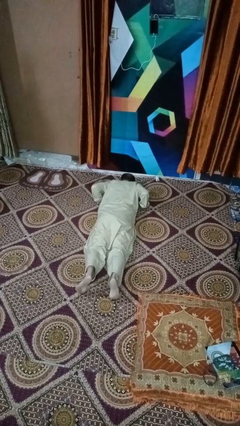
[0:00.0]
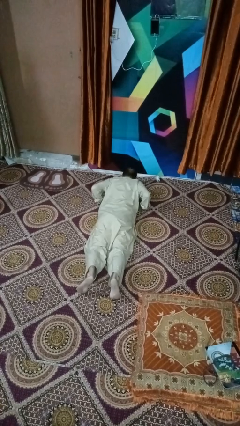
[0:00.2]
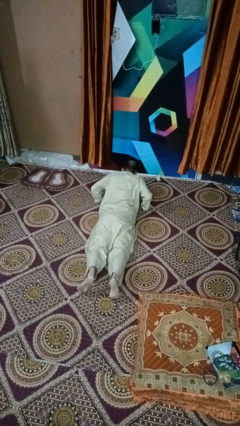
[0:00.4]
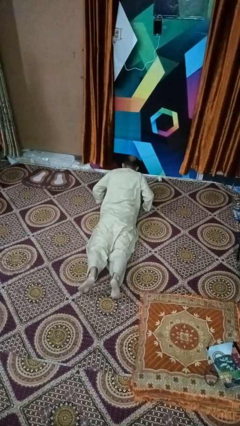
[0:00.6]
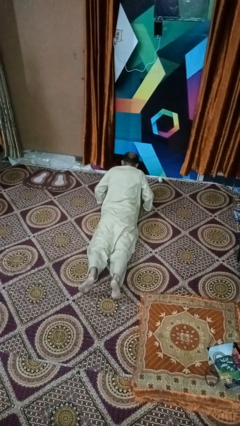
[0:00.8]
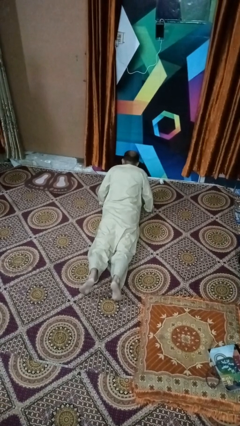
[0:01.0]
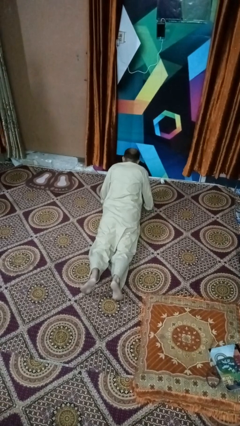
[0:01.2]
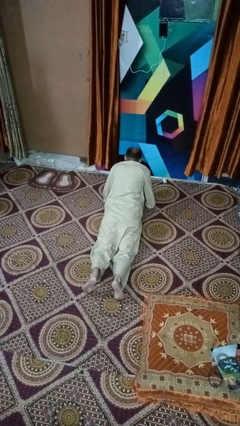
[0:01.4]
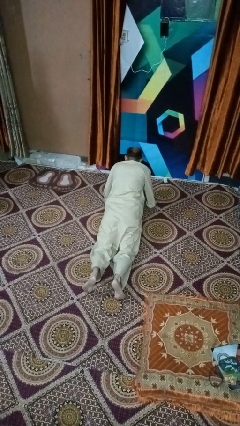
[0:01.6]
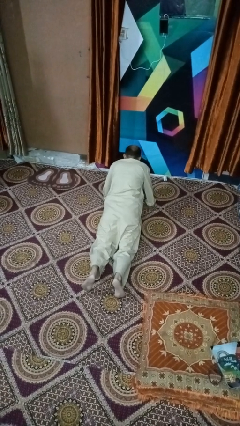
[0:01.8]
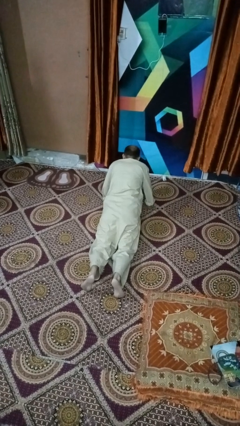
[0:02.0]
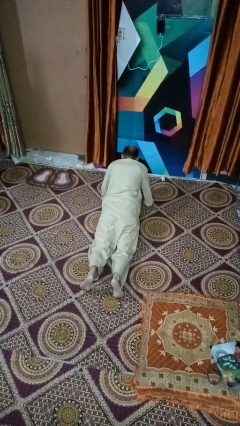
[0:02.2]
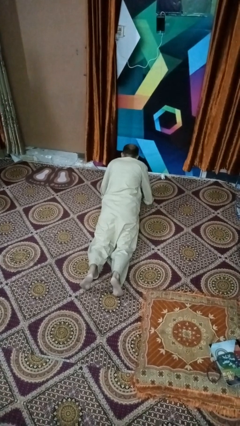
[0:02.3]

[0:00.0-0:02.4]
person exercises with situp

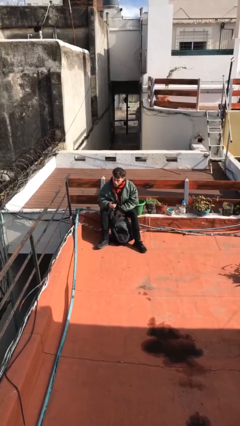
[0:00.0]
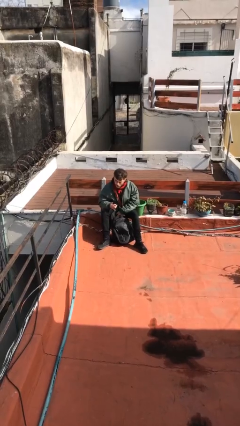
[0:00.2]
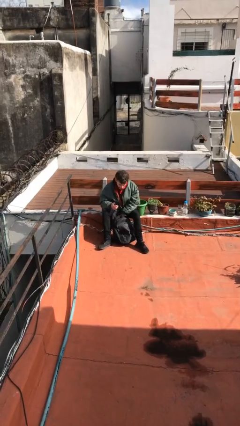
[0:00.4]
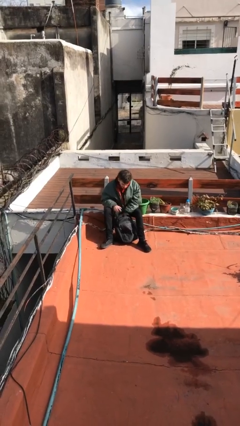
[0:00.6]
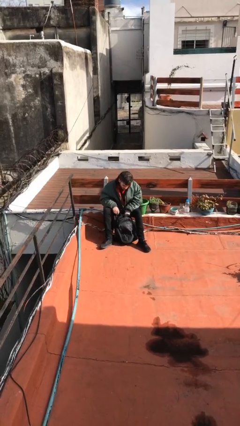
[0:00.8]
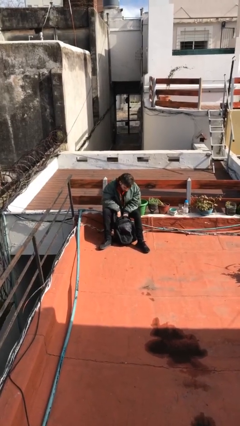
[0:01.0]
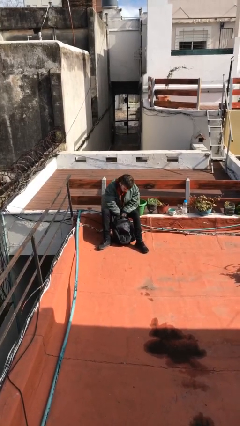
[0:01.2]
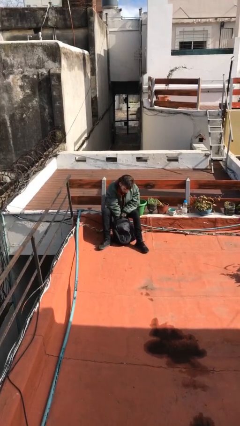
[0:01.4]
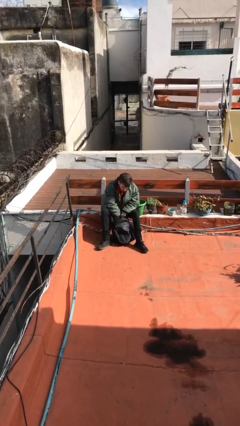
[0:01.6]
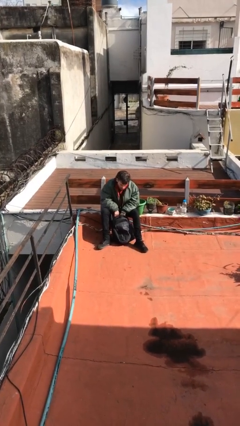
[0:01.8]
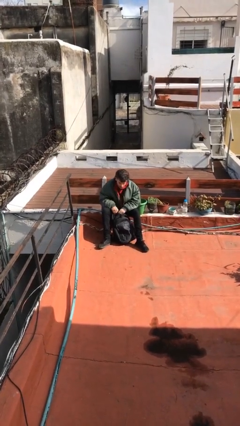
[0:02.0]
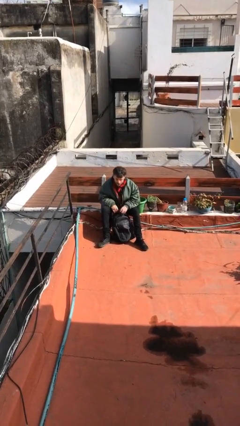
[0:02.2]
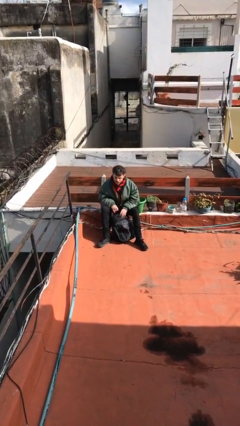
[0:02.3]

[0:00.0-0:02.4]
person puts object into backpack

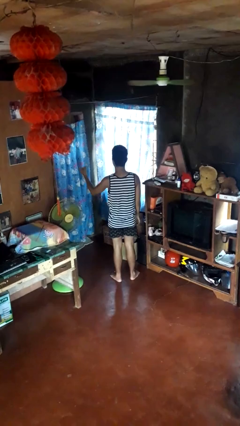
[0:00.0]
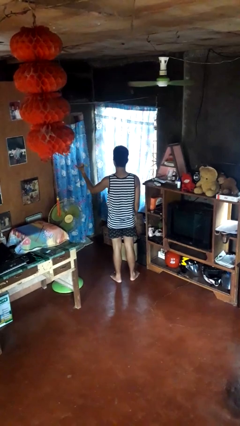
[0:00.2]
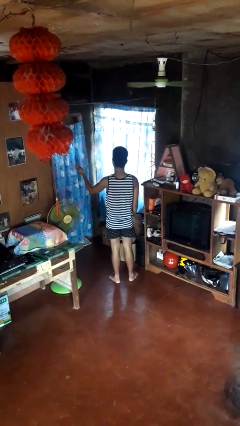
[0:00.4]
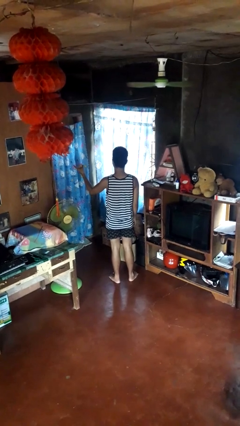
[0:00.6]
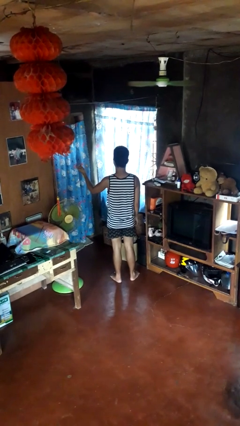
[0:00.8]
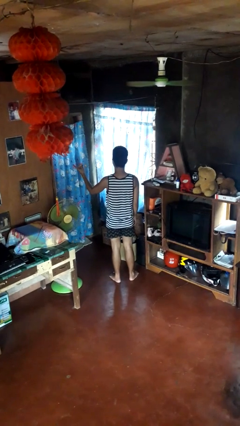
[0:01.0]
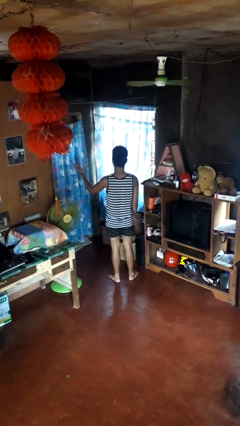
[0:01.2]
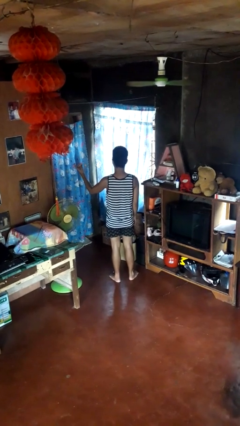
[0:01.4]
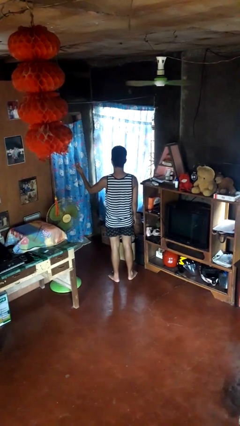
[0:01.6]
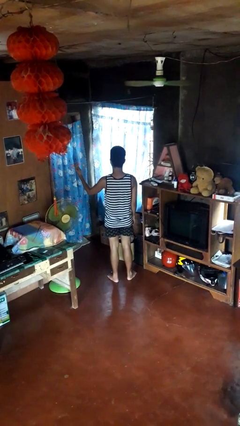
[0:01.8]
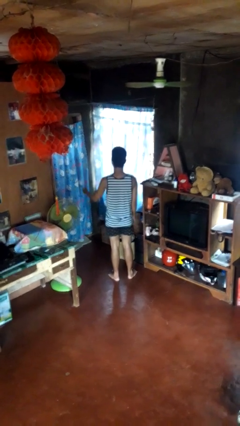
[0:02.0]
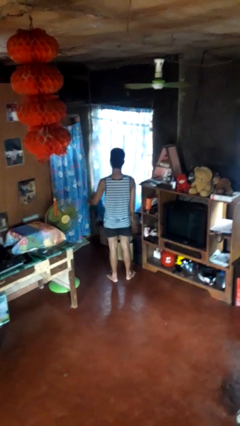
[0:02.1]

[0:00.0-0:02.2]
person snaps fingers

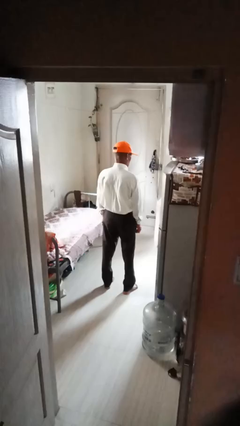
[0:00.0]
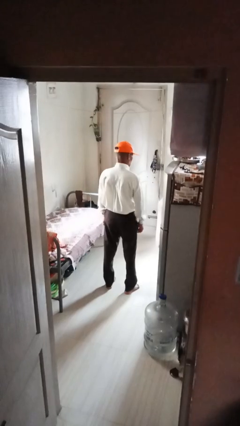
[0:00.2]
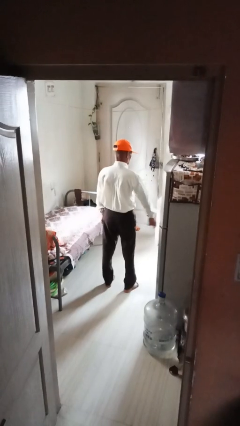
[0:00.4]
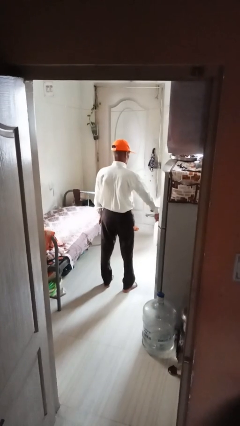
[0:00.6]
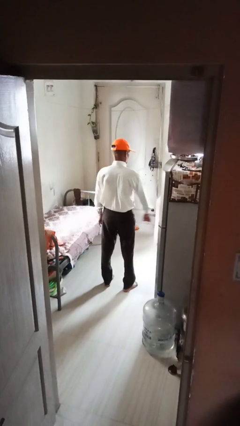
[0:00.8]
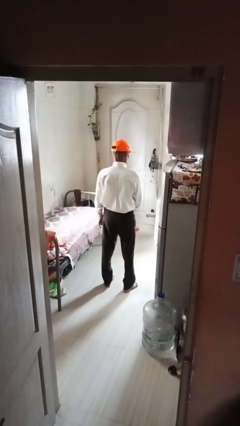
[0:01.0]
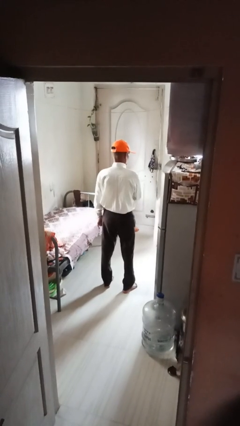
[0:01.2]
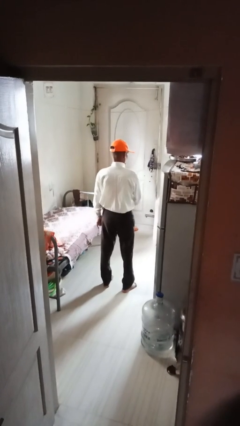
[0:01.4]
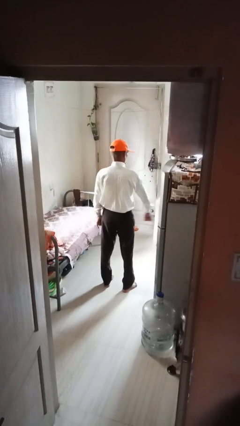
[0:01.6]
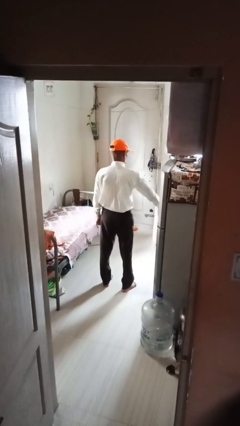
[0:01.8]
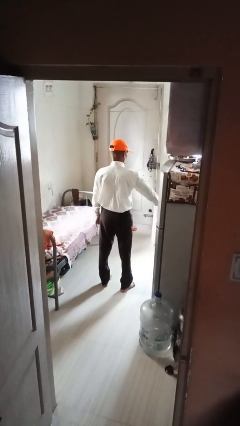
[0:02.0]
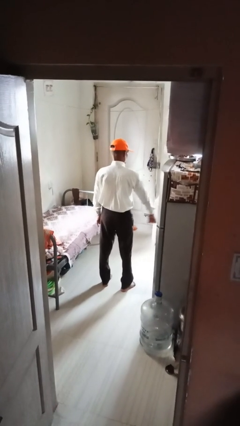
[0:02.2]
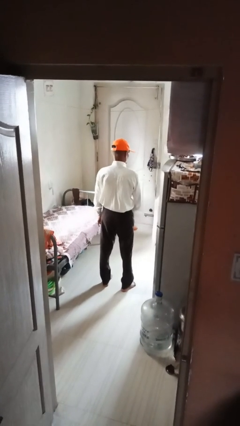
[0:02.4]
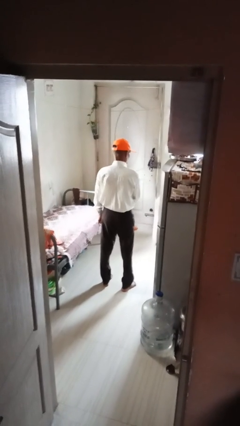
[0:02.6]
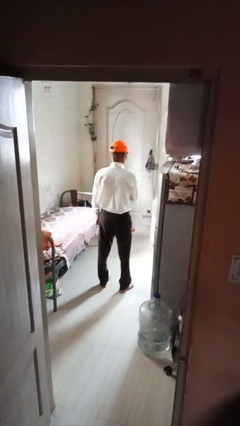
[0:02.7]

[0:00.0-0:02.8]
person gestures hang loose

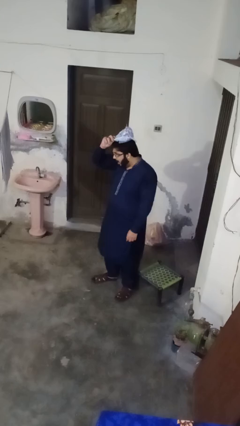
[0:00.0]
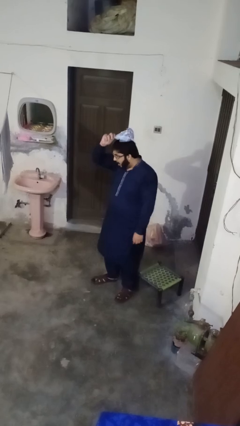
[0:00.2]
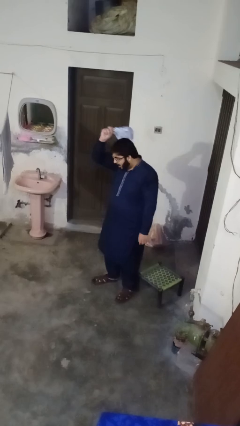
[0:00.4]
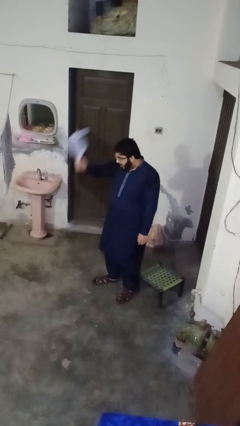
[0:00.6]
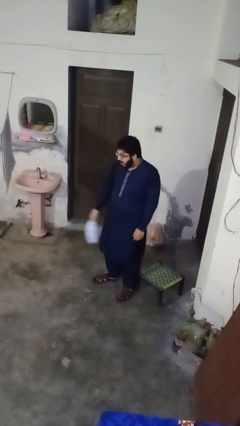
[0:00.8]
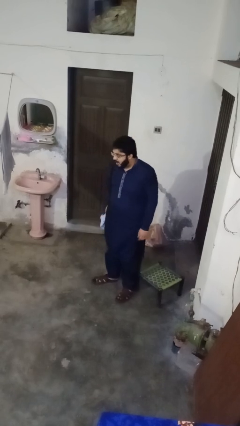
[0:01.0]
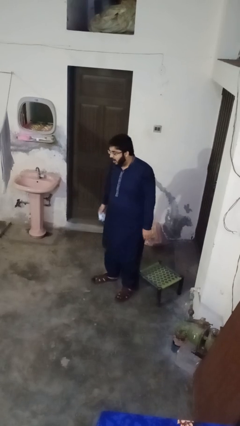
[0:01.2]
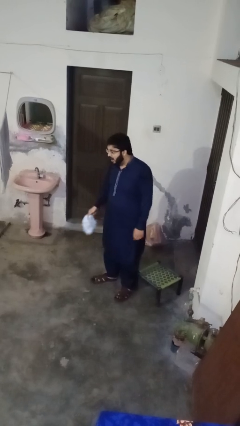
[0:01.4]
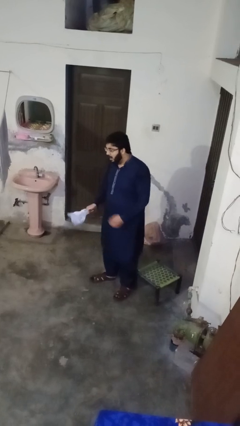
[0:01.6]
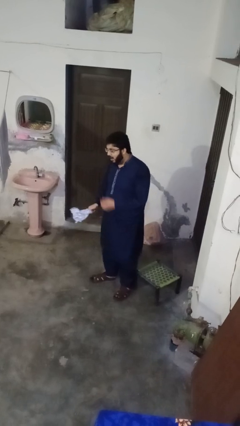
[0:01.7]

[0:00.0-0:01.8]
person takes off hat

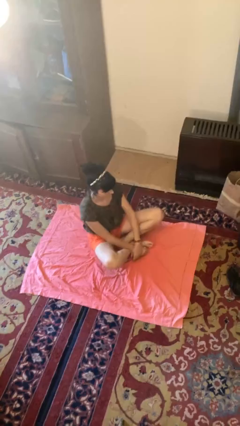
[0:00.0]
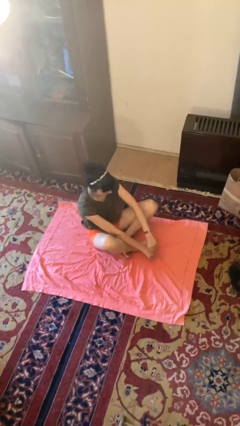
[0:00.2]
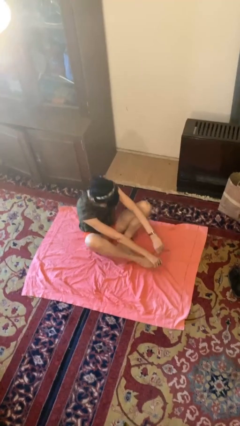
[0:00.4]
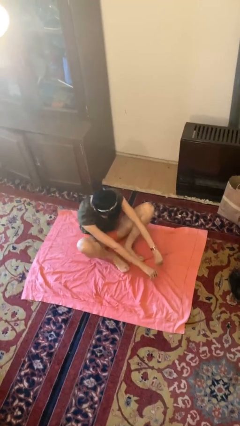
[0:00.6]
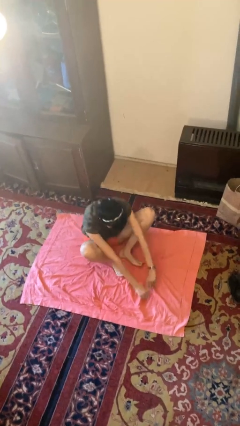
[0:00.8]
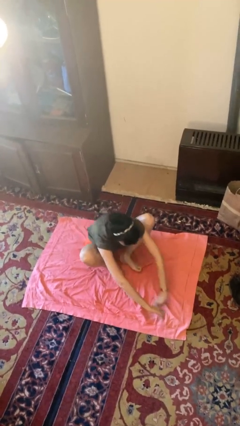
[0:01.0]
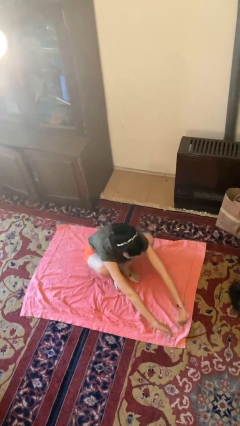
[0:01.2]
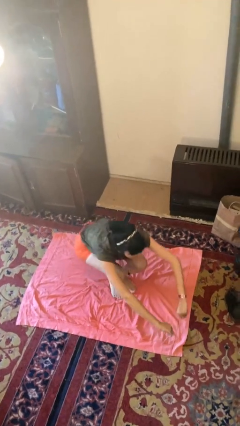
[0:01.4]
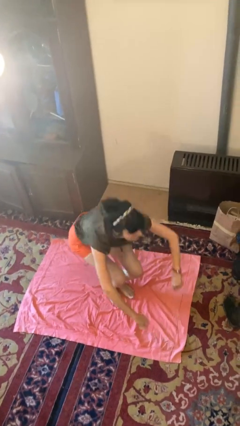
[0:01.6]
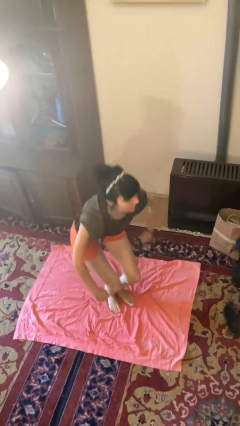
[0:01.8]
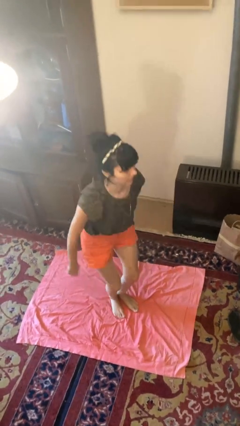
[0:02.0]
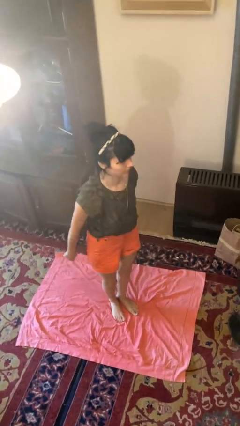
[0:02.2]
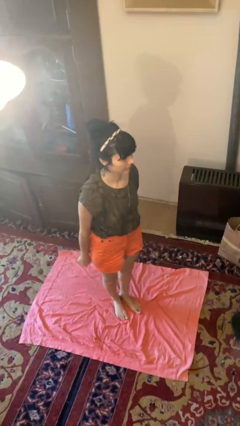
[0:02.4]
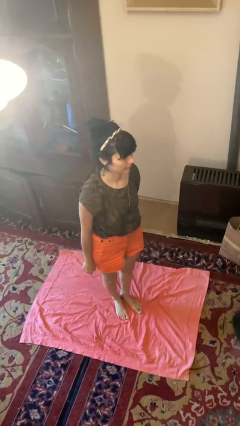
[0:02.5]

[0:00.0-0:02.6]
person stands up from floor

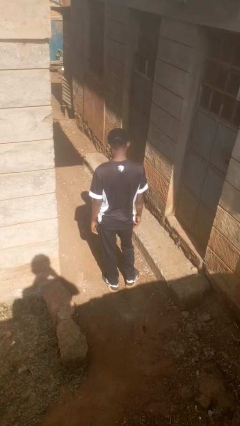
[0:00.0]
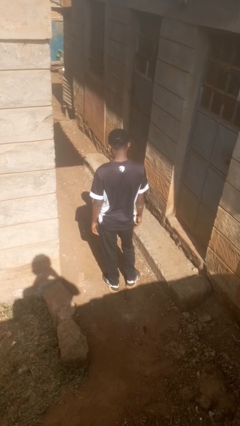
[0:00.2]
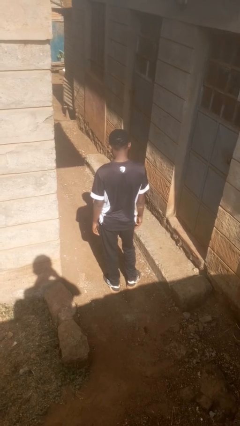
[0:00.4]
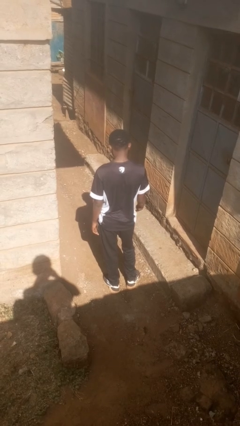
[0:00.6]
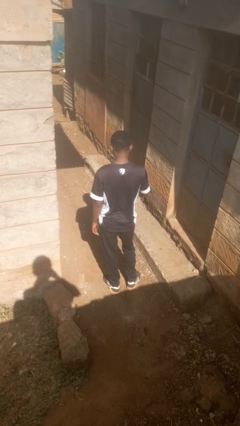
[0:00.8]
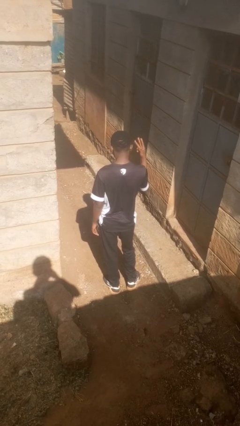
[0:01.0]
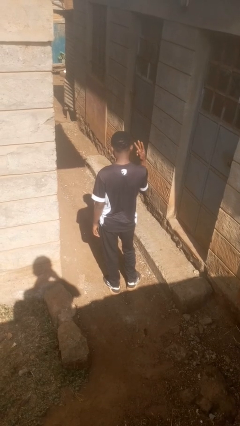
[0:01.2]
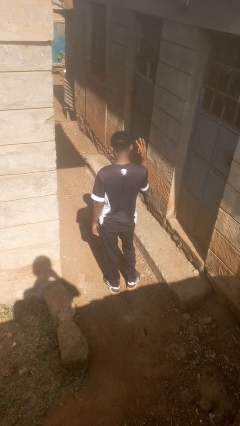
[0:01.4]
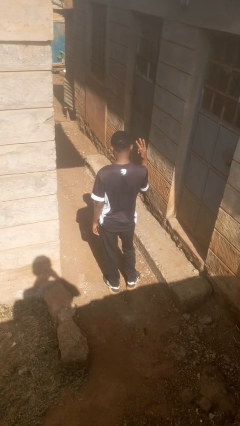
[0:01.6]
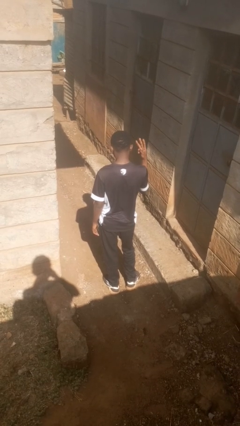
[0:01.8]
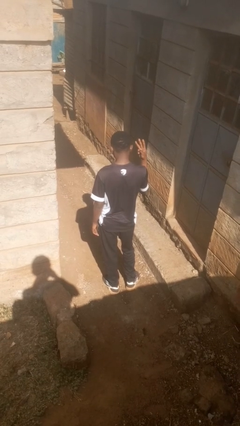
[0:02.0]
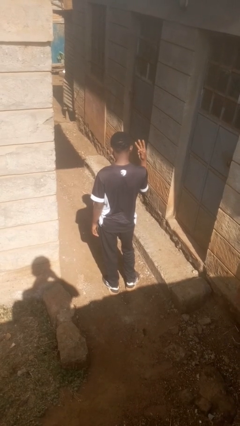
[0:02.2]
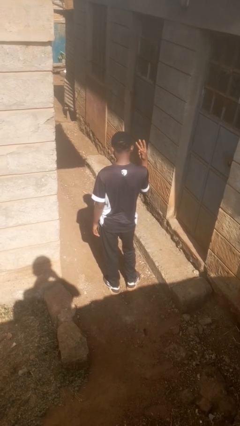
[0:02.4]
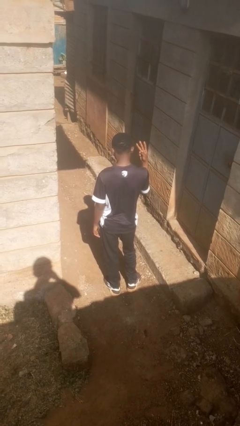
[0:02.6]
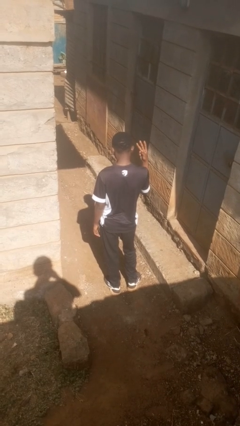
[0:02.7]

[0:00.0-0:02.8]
person gestures number three

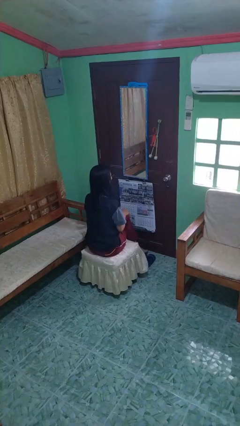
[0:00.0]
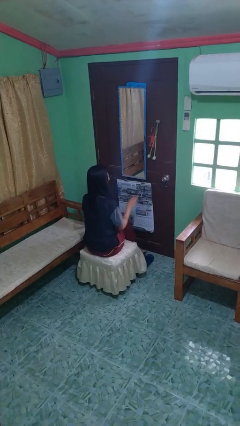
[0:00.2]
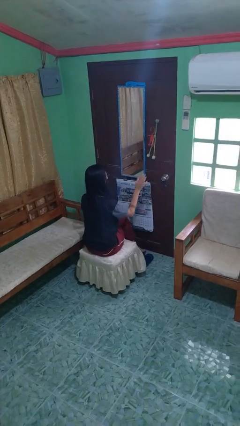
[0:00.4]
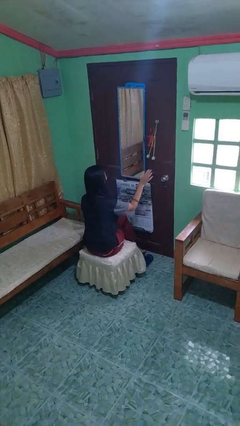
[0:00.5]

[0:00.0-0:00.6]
person gestures swipe right
